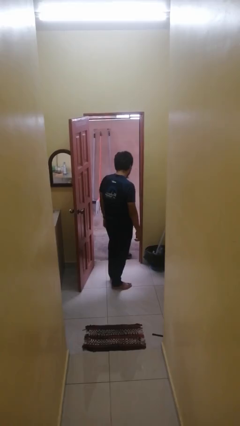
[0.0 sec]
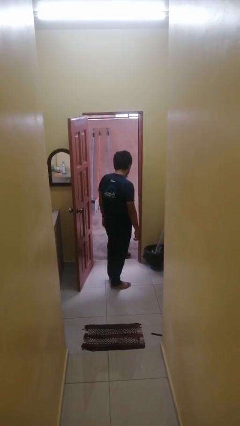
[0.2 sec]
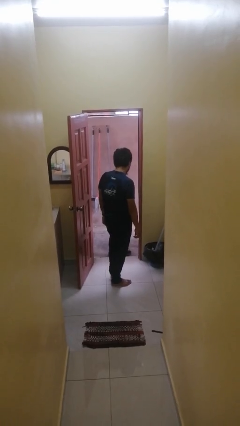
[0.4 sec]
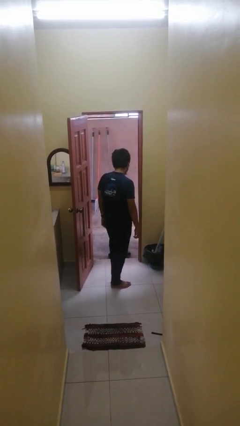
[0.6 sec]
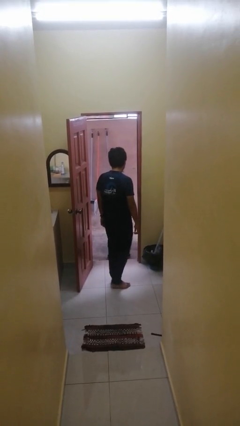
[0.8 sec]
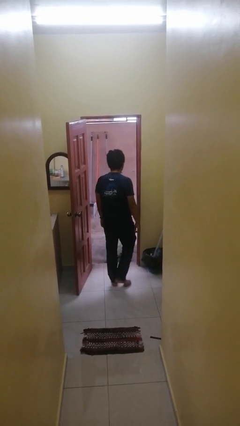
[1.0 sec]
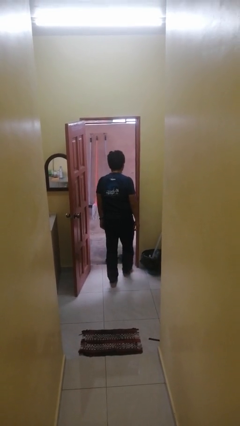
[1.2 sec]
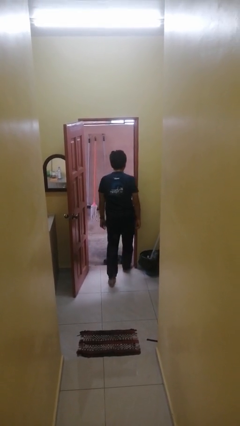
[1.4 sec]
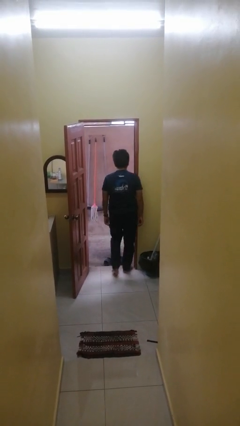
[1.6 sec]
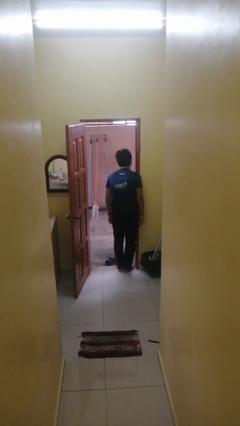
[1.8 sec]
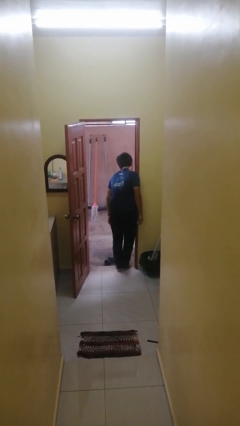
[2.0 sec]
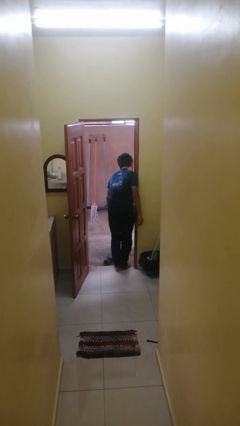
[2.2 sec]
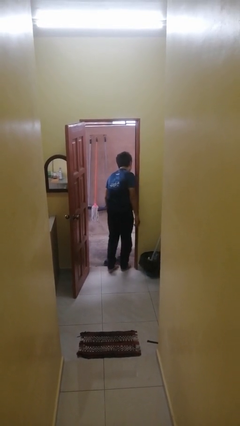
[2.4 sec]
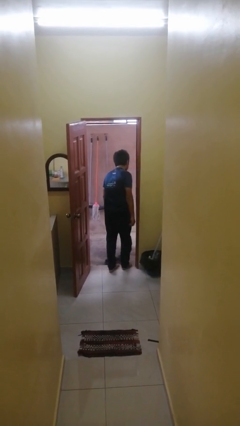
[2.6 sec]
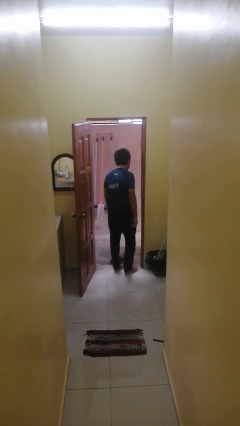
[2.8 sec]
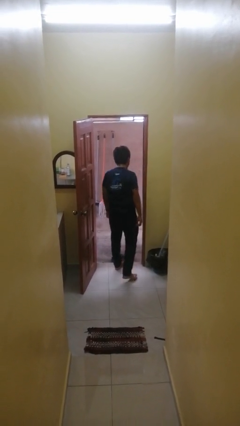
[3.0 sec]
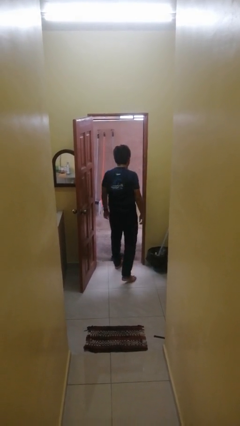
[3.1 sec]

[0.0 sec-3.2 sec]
person bumps into wall

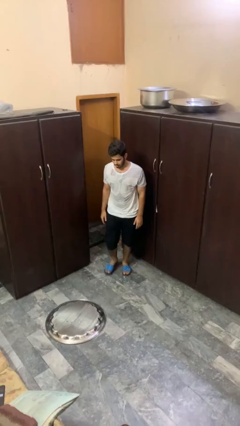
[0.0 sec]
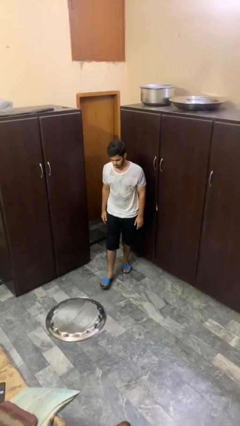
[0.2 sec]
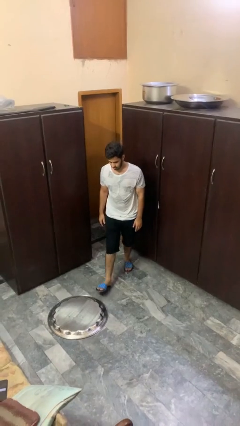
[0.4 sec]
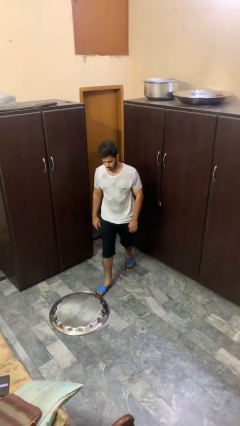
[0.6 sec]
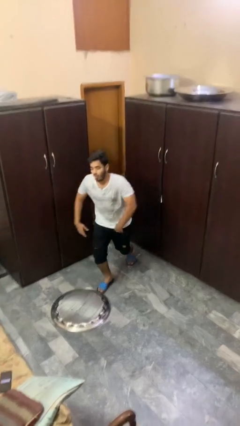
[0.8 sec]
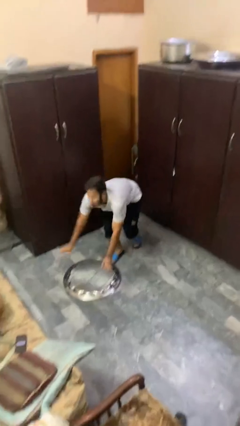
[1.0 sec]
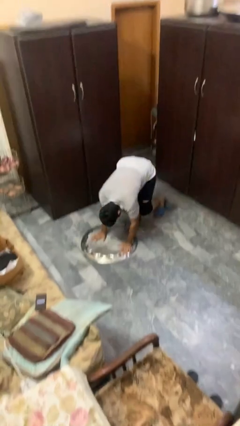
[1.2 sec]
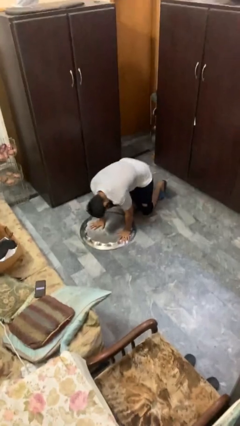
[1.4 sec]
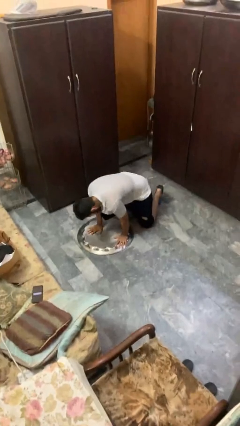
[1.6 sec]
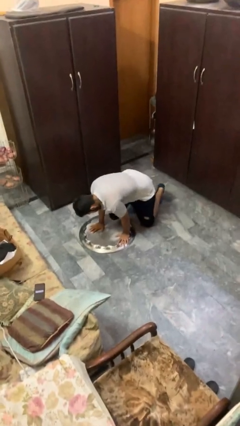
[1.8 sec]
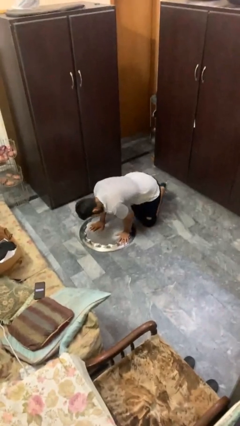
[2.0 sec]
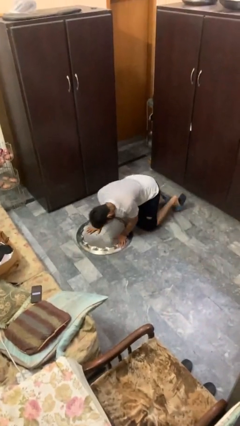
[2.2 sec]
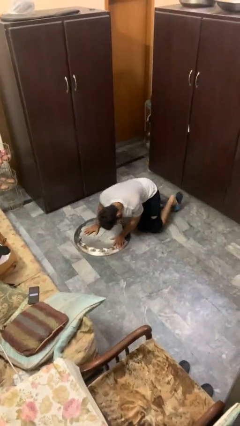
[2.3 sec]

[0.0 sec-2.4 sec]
person trips on object on floor

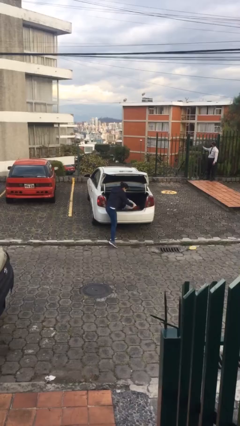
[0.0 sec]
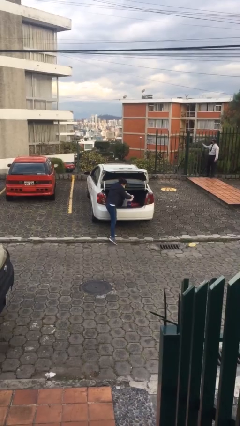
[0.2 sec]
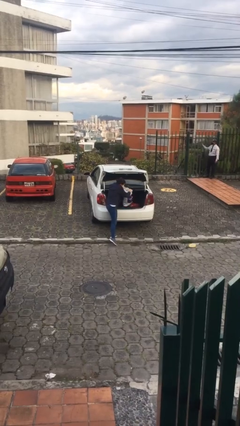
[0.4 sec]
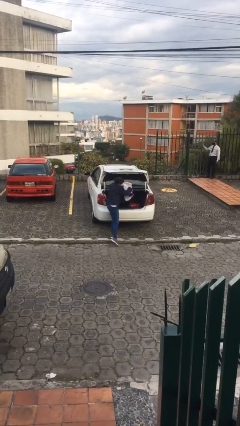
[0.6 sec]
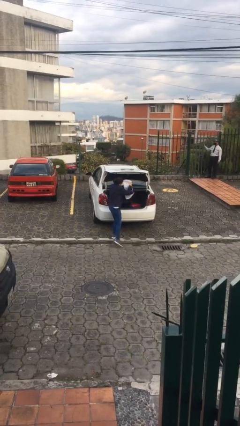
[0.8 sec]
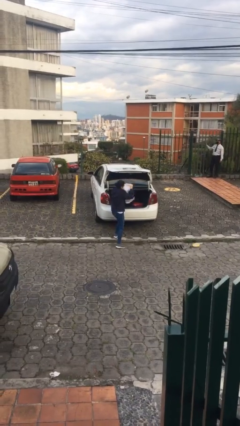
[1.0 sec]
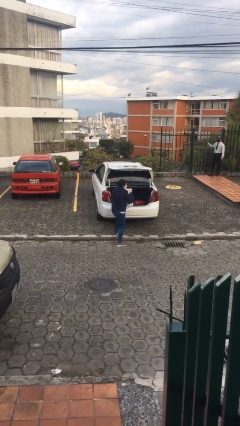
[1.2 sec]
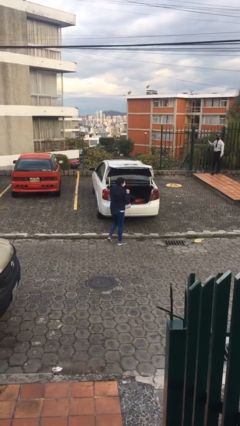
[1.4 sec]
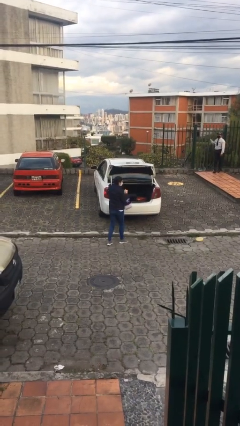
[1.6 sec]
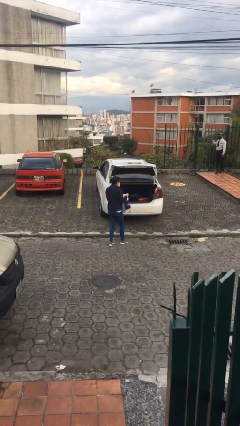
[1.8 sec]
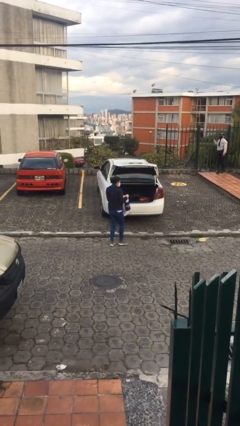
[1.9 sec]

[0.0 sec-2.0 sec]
person unloads car

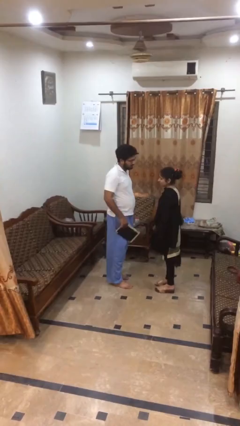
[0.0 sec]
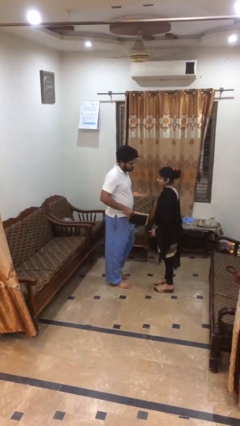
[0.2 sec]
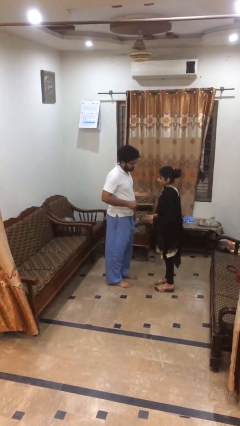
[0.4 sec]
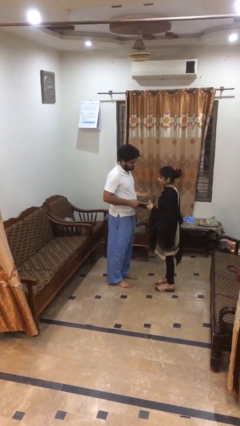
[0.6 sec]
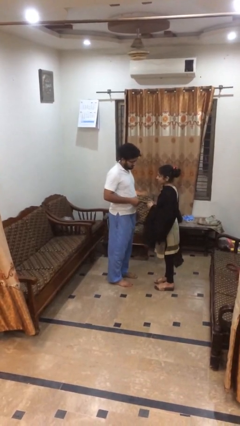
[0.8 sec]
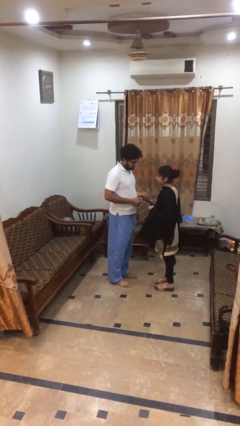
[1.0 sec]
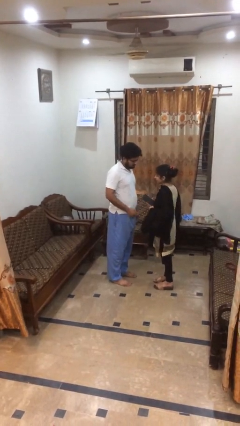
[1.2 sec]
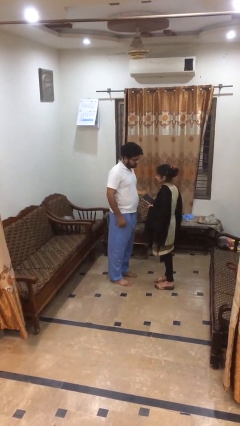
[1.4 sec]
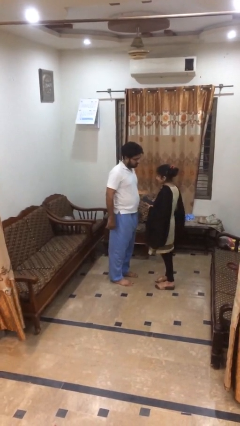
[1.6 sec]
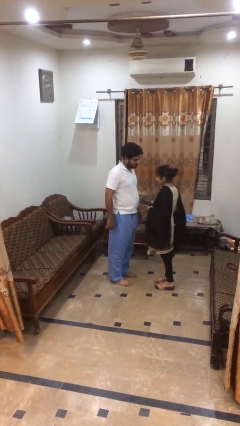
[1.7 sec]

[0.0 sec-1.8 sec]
person transfers object to person

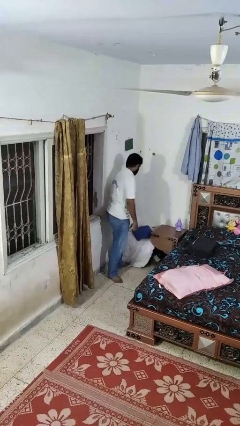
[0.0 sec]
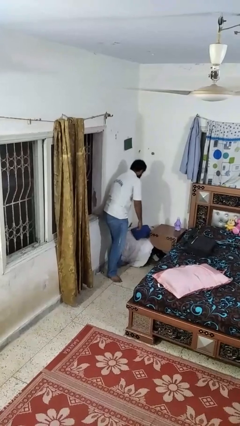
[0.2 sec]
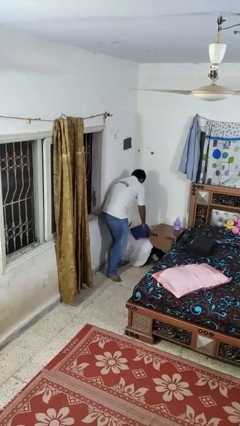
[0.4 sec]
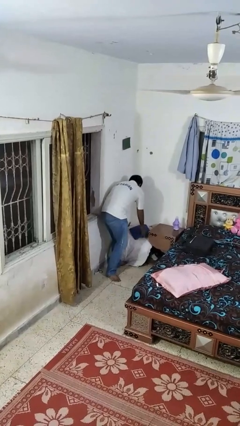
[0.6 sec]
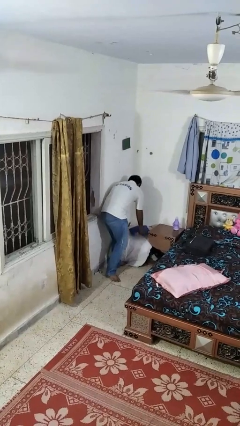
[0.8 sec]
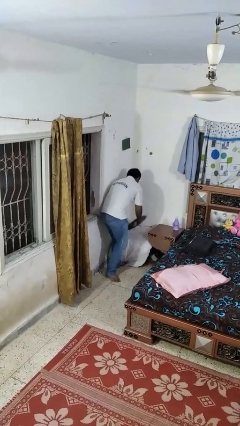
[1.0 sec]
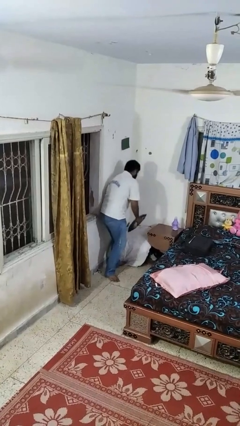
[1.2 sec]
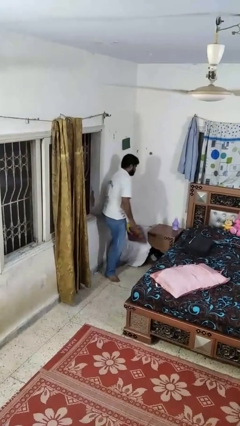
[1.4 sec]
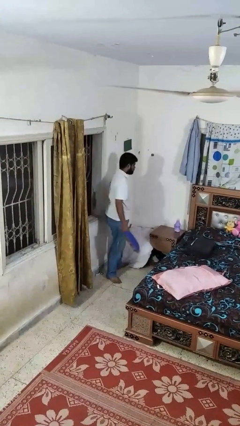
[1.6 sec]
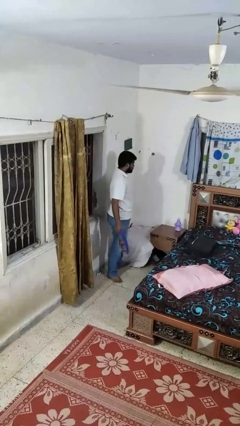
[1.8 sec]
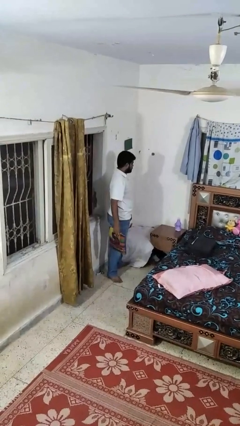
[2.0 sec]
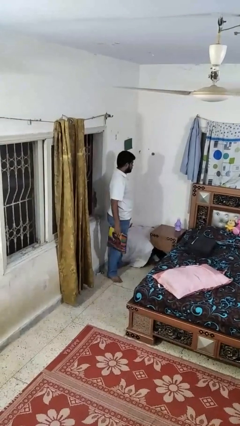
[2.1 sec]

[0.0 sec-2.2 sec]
person picks up object from couch

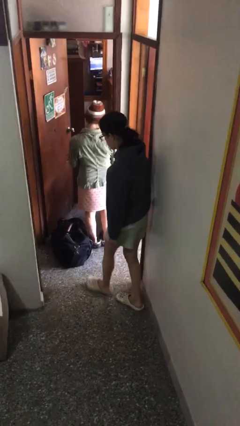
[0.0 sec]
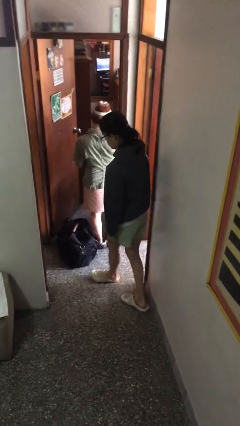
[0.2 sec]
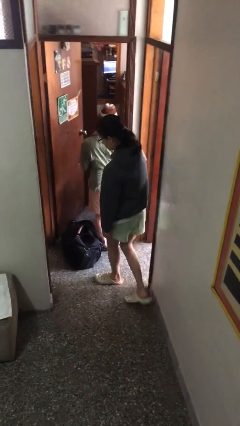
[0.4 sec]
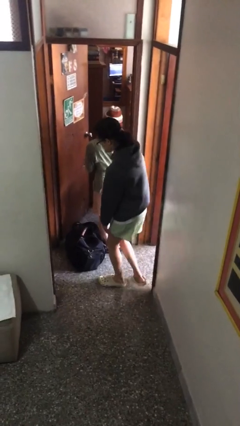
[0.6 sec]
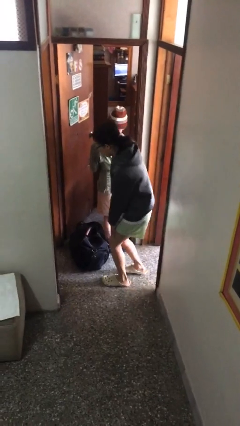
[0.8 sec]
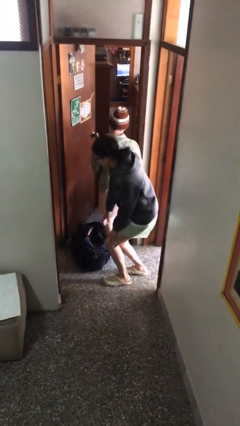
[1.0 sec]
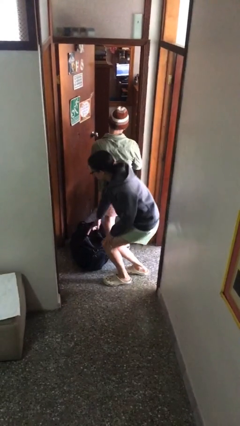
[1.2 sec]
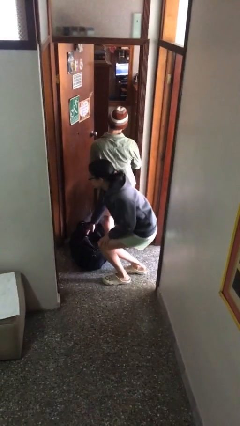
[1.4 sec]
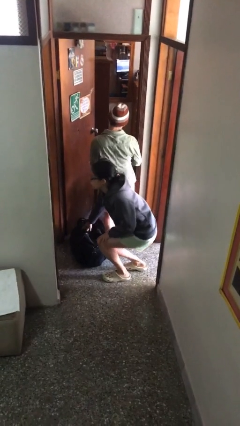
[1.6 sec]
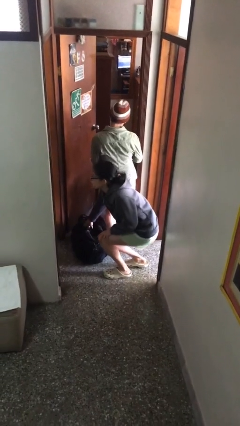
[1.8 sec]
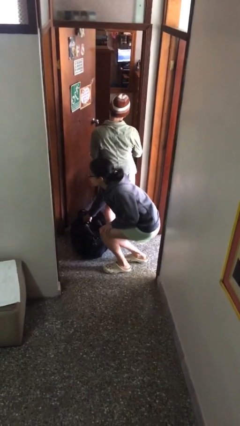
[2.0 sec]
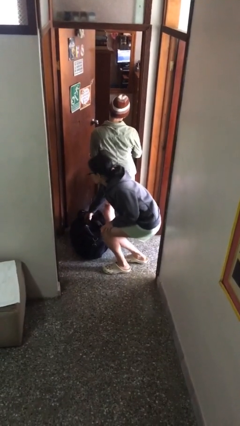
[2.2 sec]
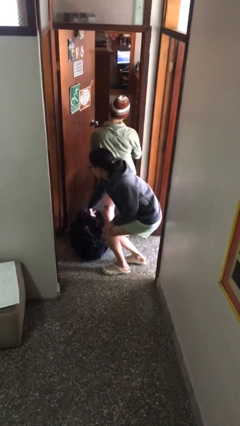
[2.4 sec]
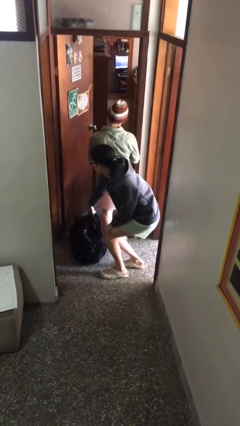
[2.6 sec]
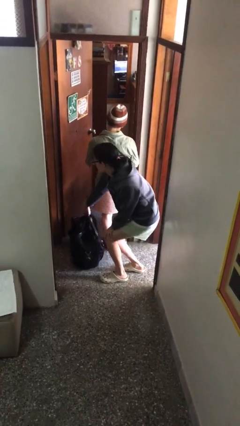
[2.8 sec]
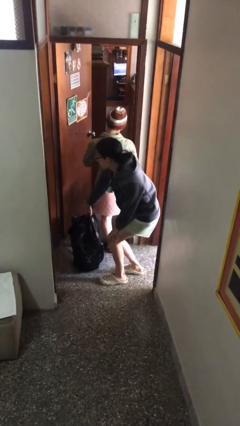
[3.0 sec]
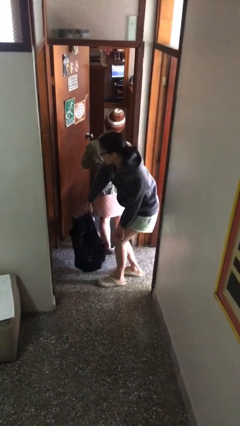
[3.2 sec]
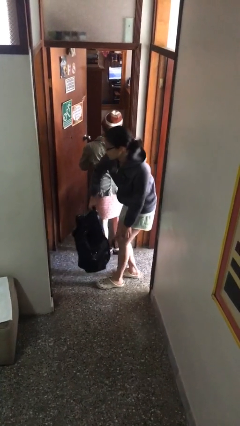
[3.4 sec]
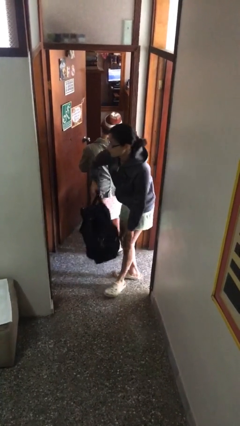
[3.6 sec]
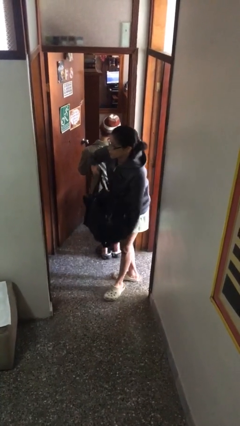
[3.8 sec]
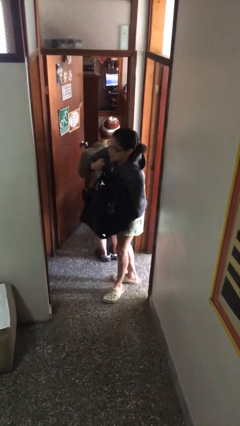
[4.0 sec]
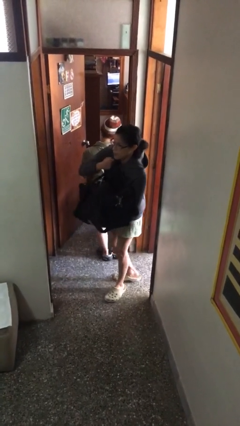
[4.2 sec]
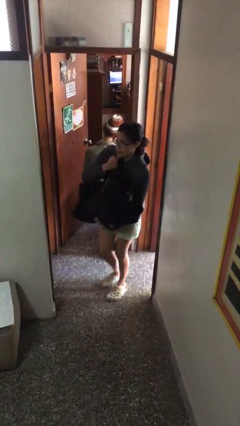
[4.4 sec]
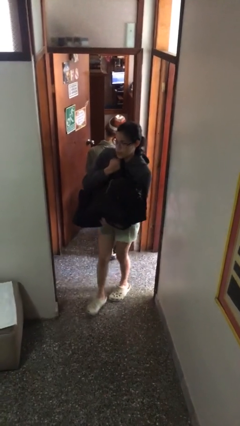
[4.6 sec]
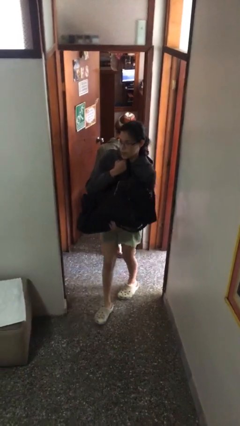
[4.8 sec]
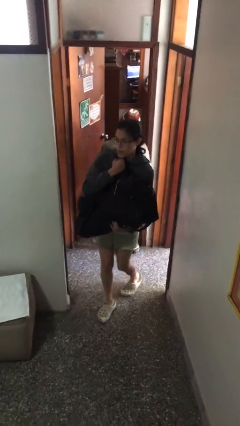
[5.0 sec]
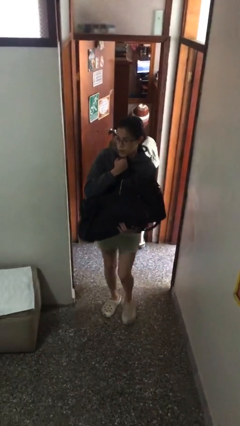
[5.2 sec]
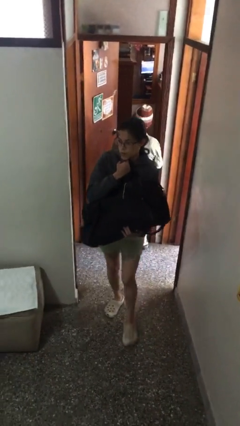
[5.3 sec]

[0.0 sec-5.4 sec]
person steals object from person

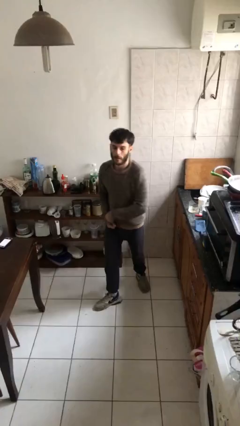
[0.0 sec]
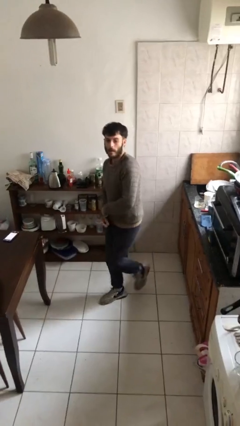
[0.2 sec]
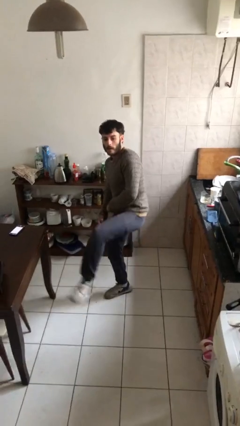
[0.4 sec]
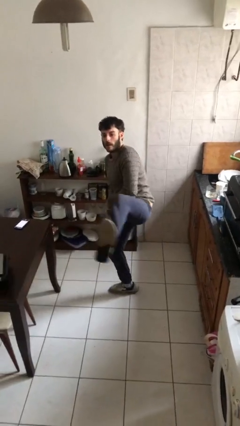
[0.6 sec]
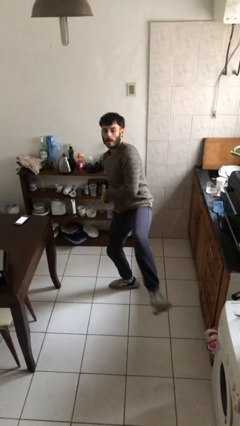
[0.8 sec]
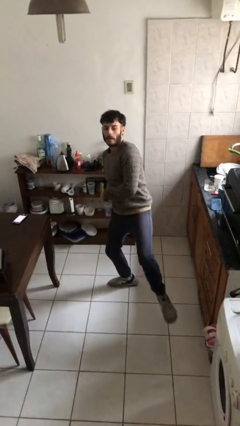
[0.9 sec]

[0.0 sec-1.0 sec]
person karate kicks
